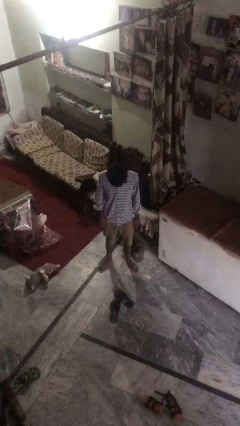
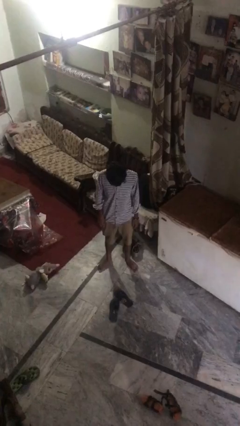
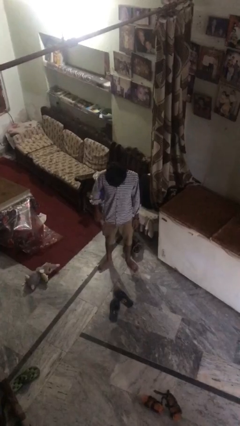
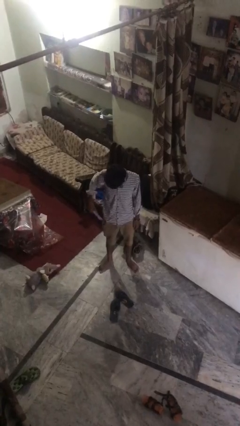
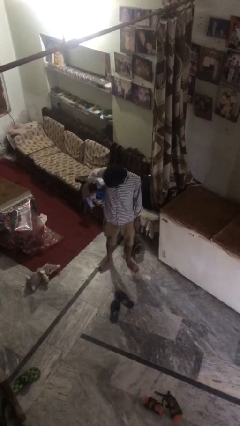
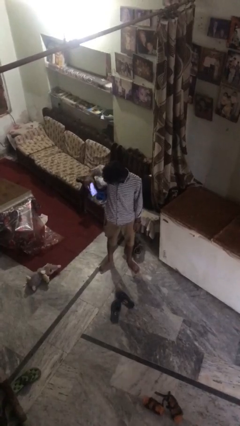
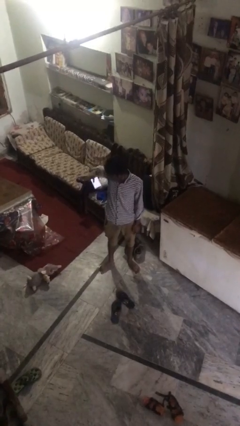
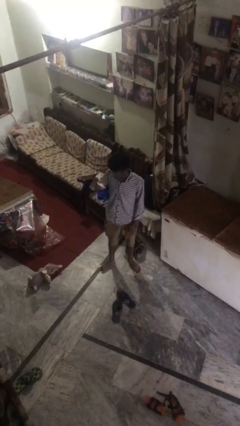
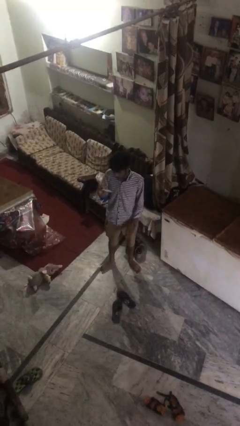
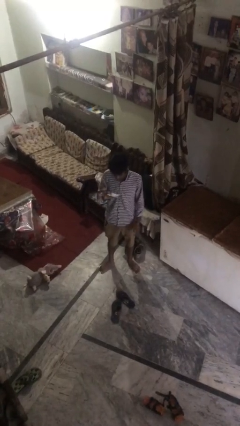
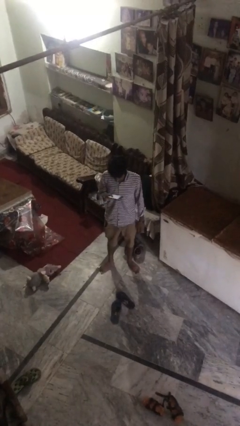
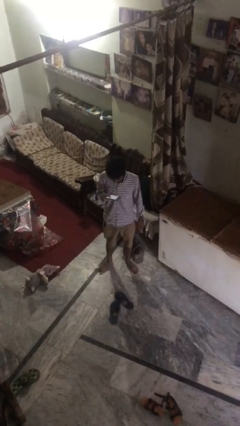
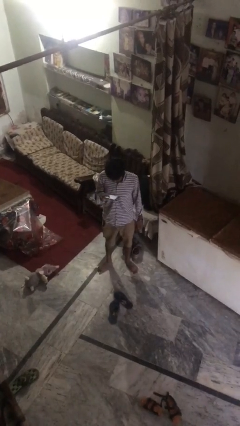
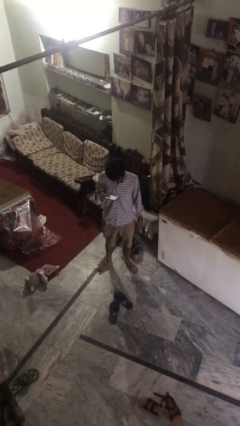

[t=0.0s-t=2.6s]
person takes phone from pocket

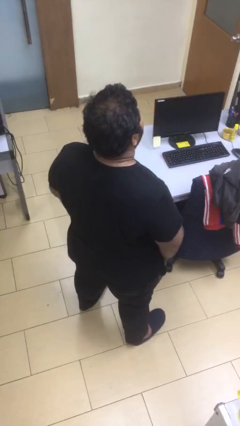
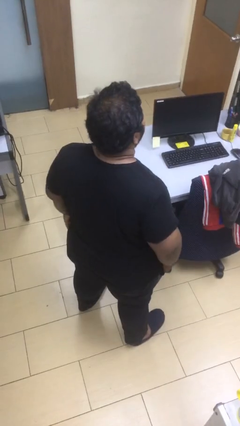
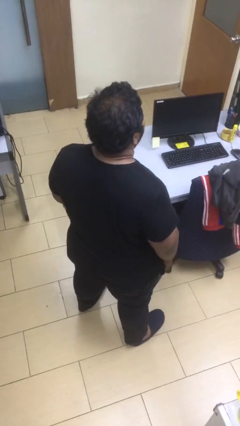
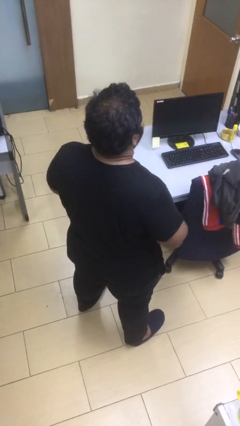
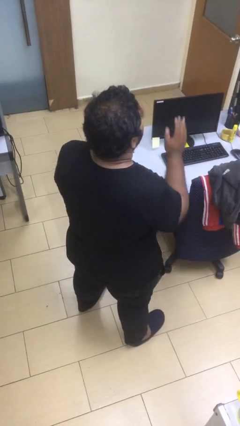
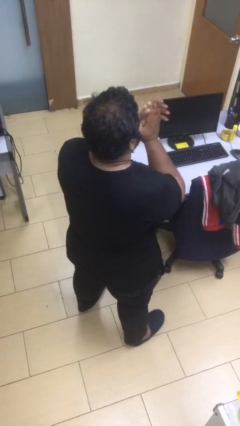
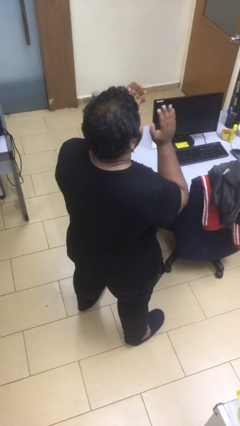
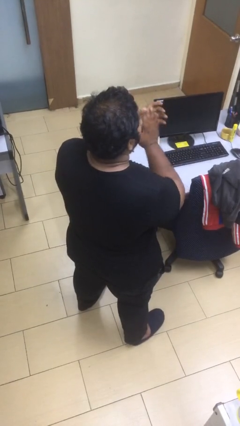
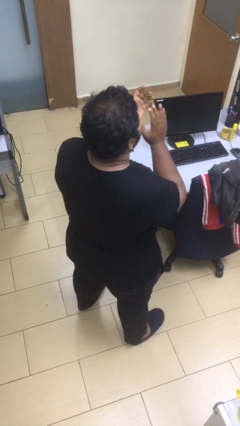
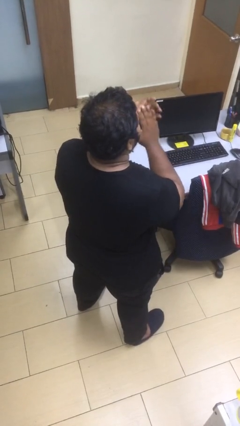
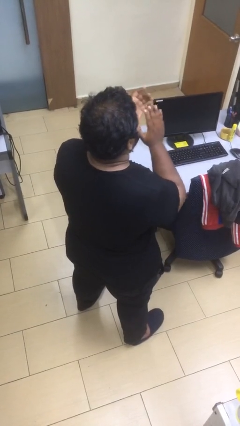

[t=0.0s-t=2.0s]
person claps hands

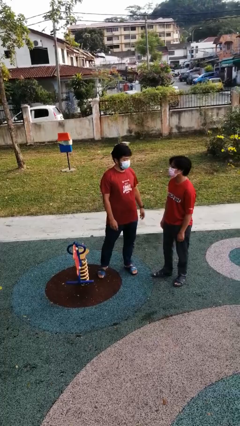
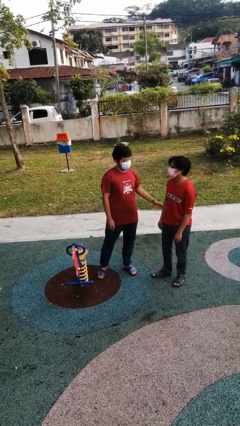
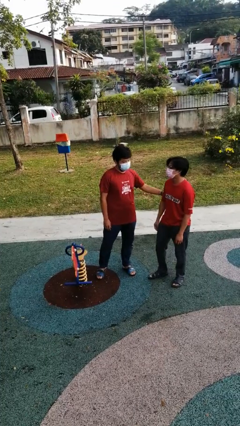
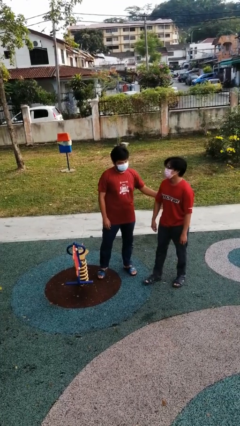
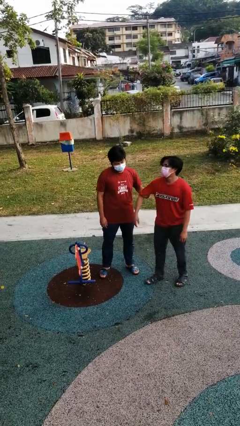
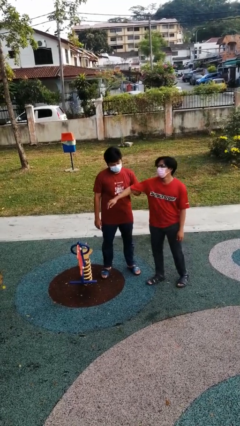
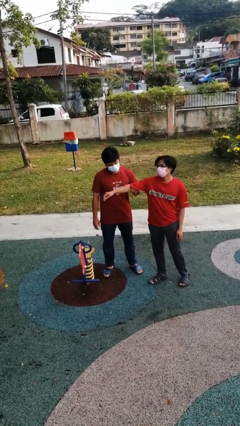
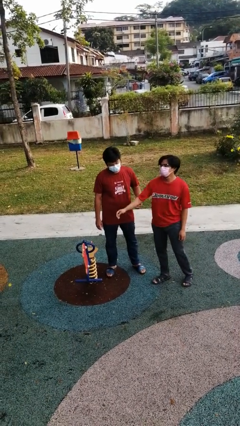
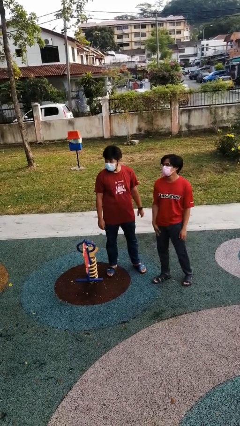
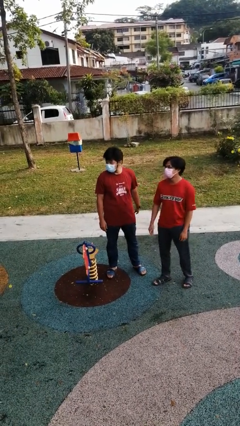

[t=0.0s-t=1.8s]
person grabs person by bicep

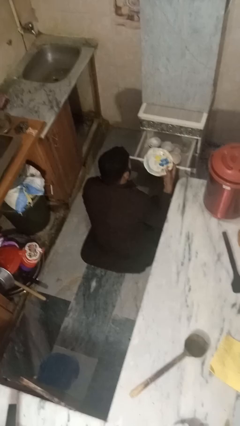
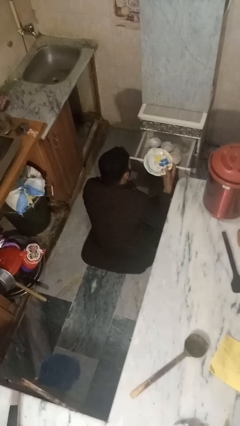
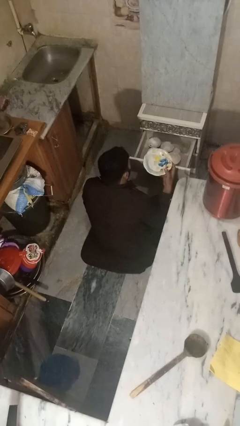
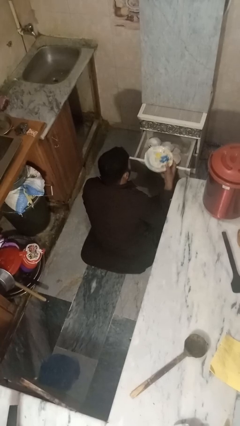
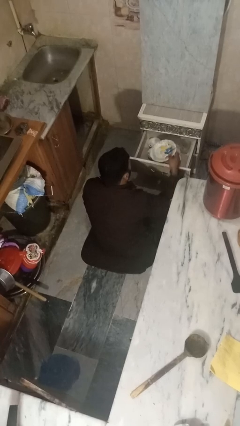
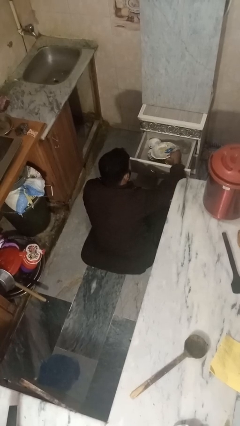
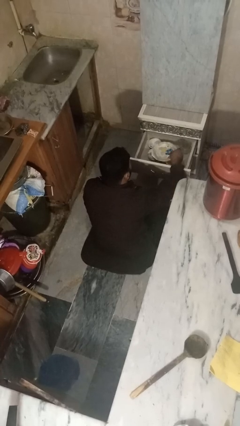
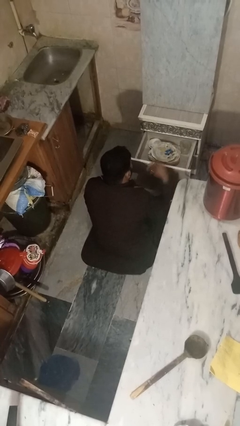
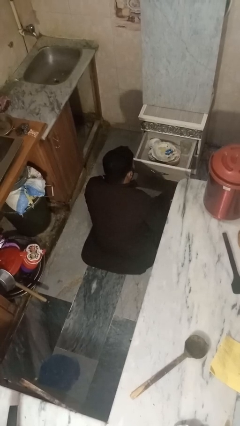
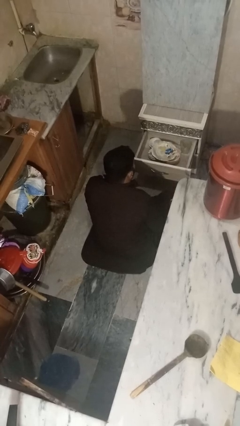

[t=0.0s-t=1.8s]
person puts object into kitchen drawer

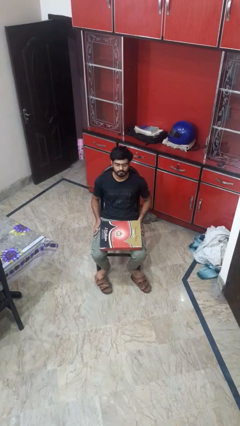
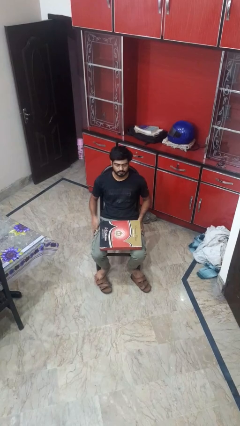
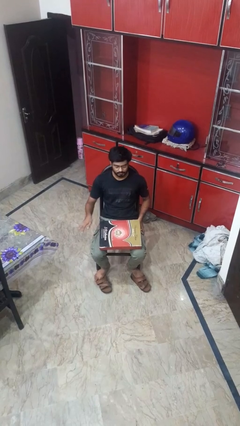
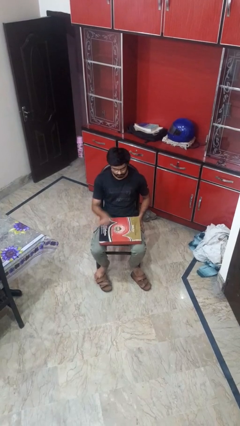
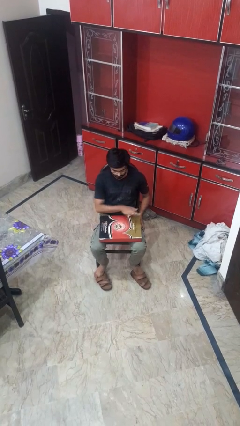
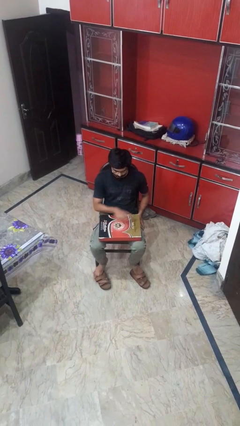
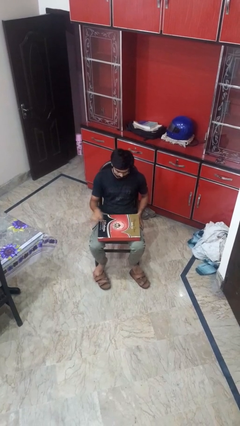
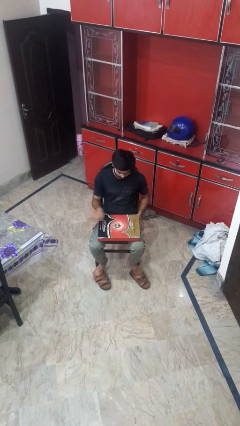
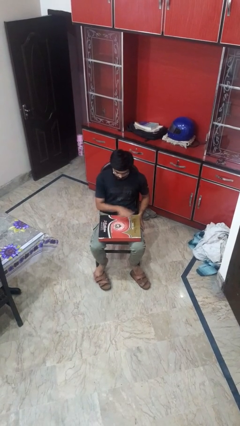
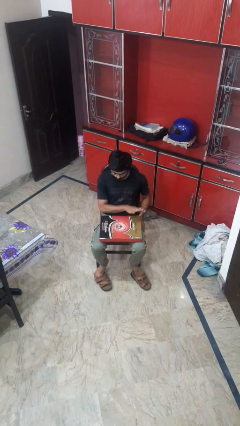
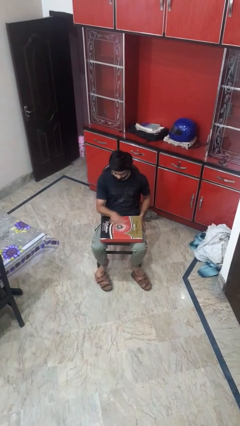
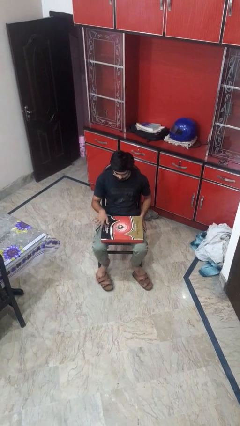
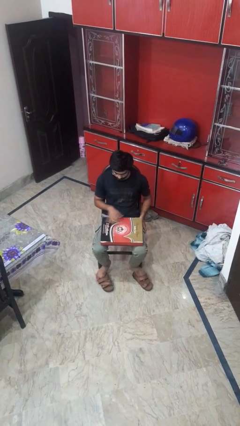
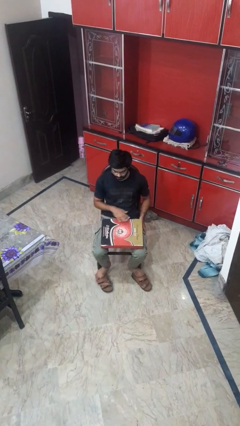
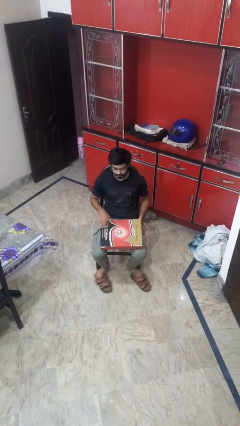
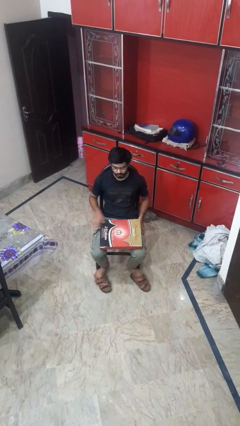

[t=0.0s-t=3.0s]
person waves hand over object

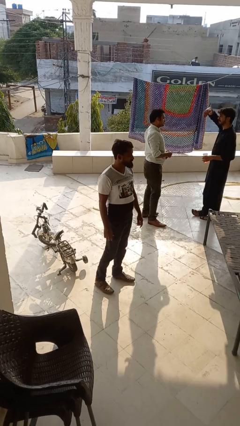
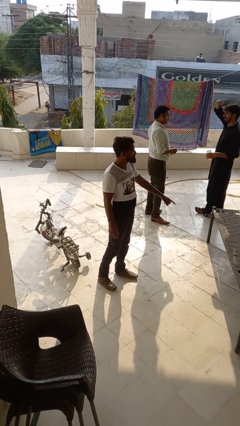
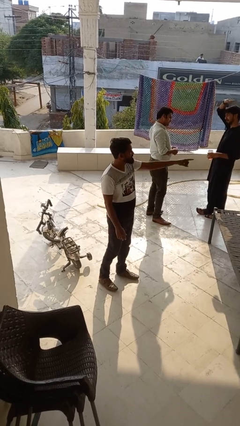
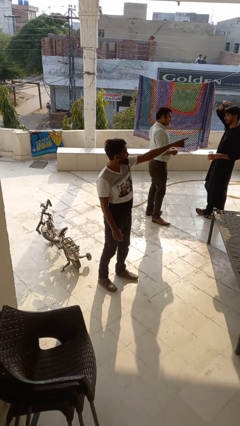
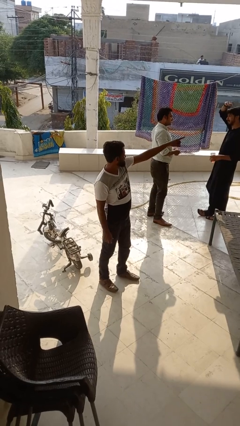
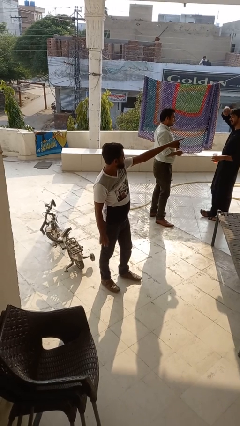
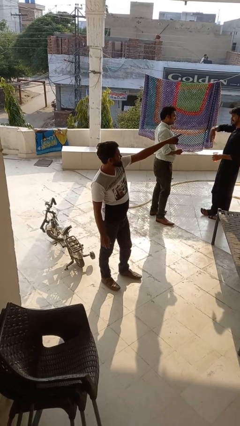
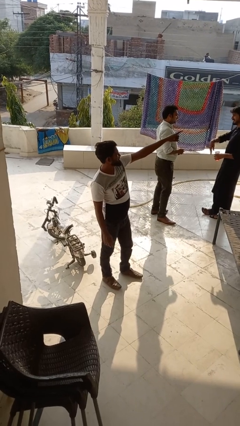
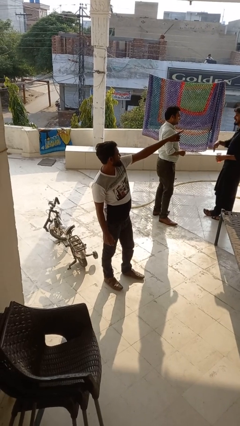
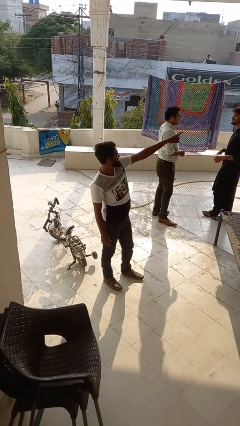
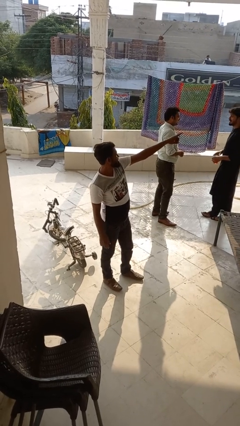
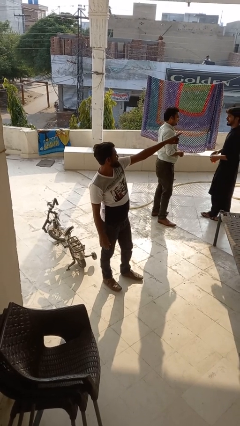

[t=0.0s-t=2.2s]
person points at person

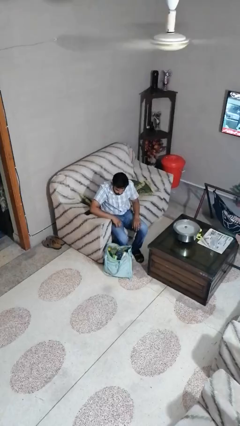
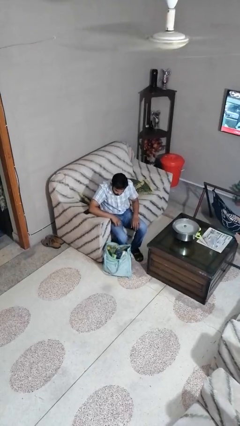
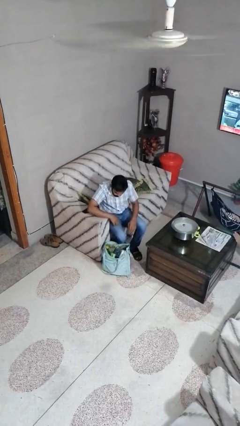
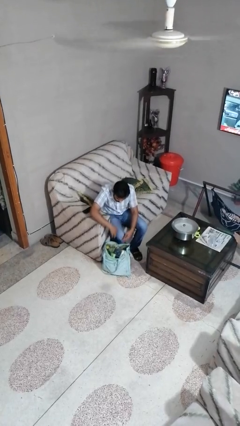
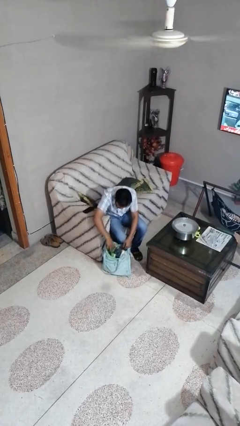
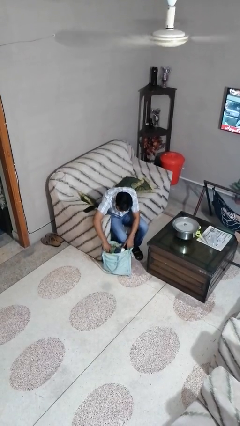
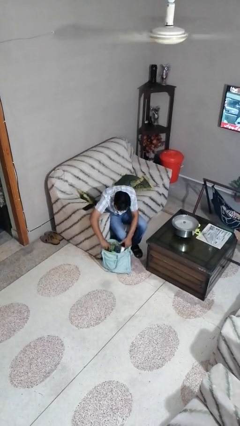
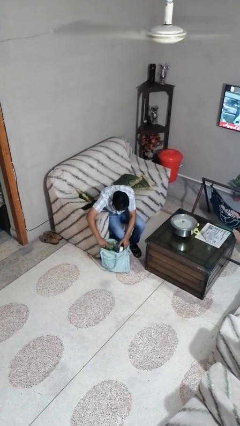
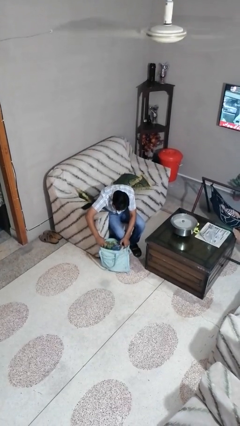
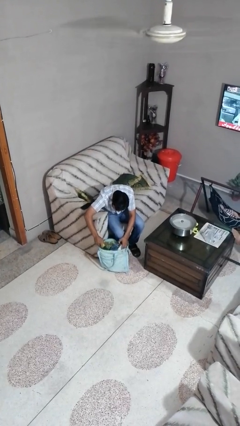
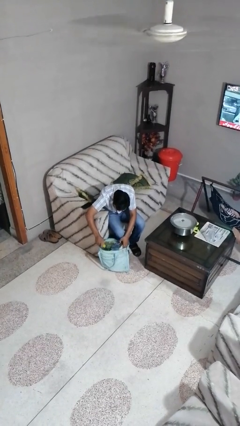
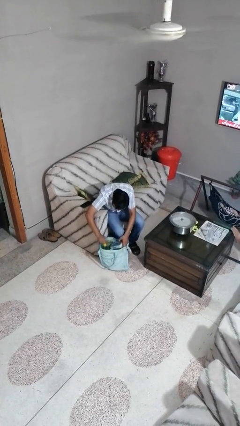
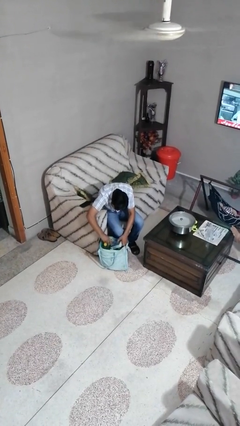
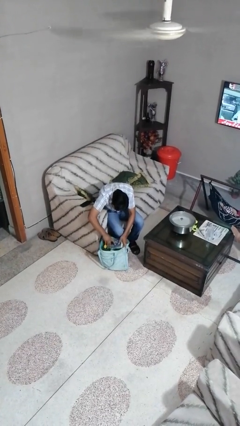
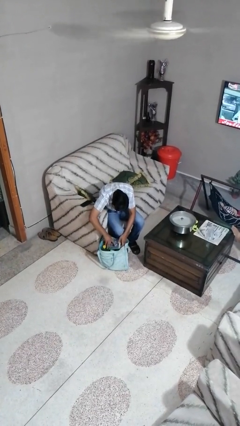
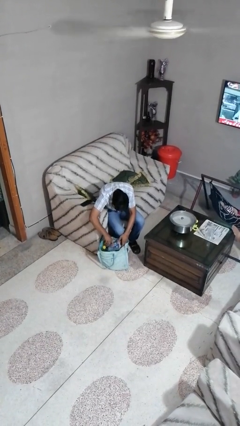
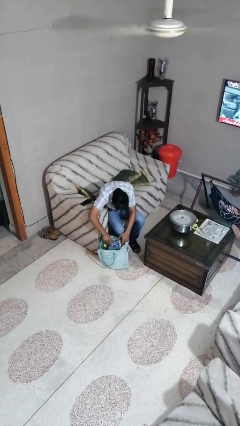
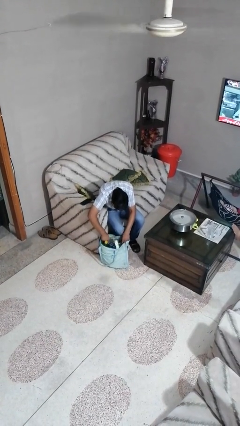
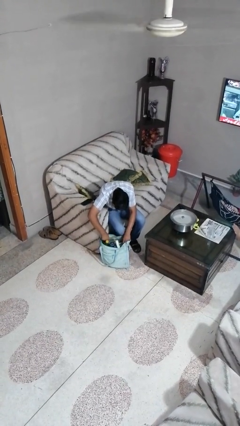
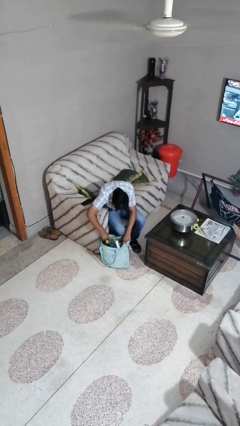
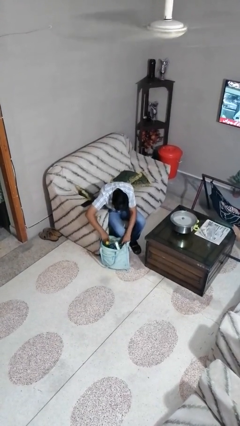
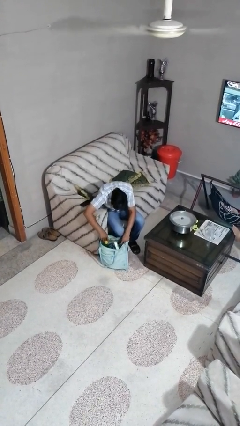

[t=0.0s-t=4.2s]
person searches in bag
